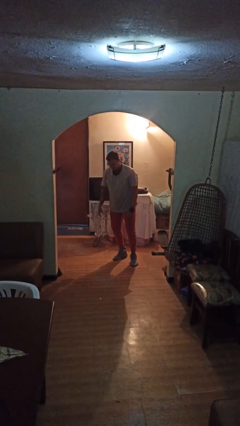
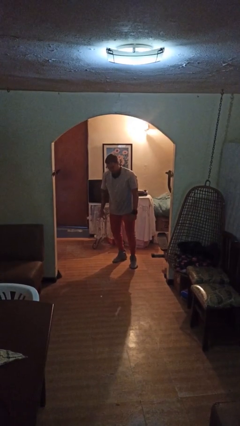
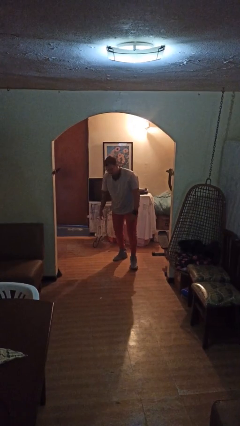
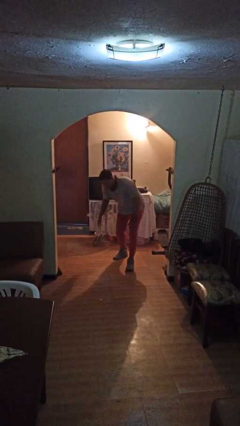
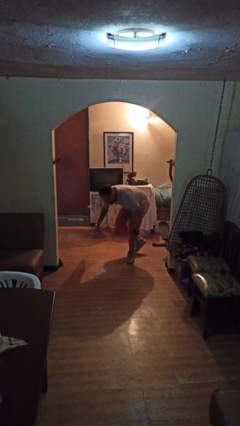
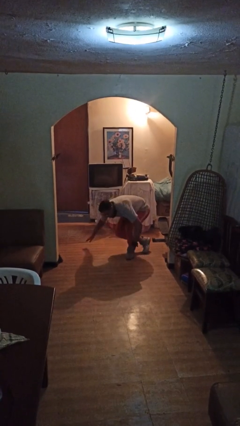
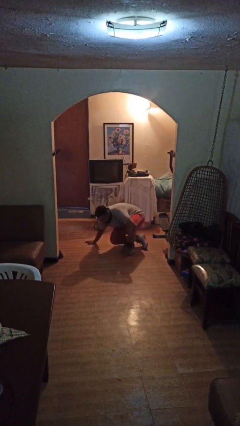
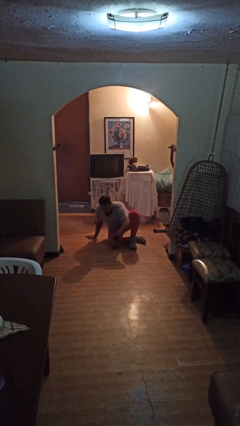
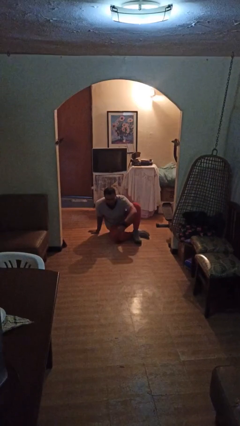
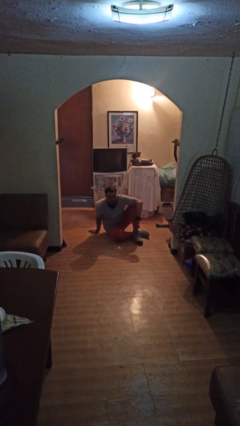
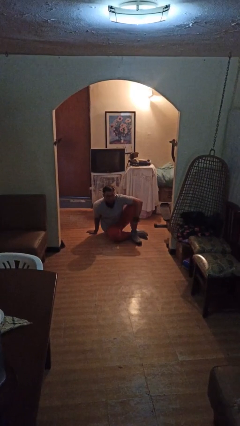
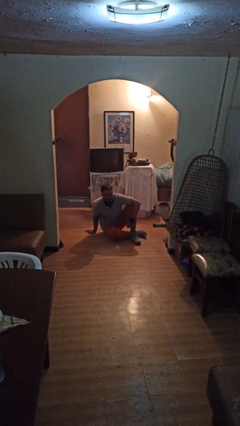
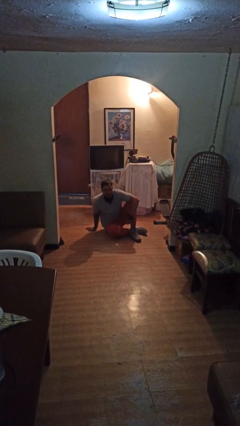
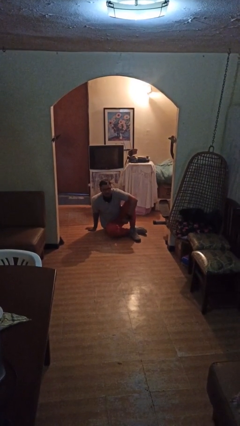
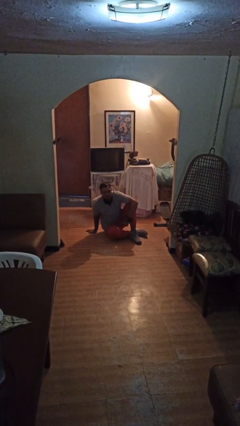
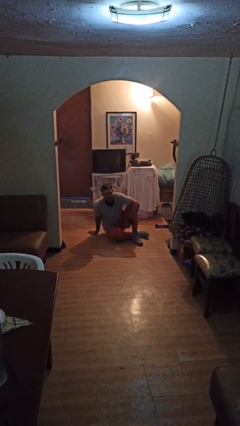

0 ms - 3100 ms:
person sits down

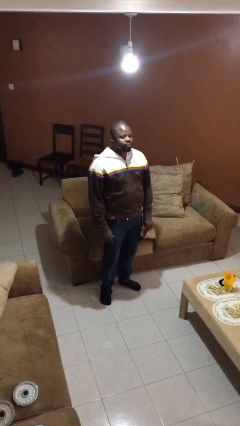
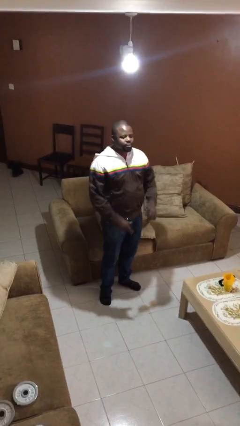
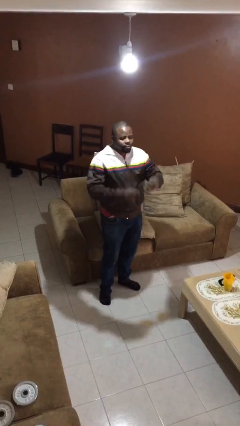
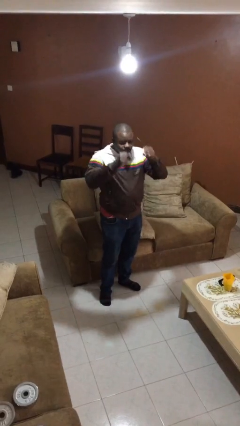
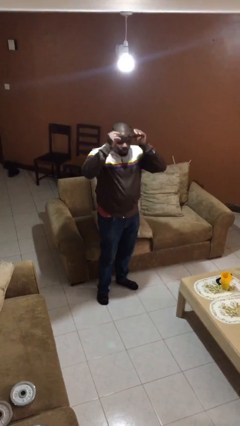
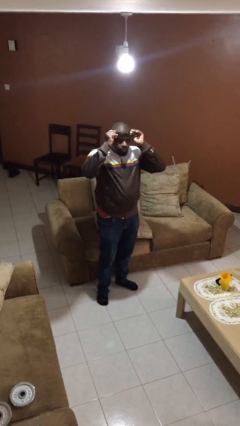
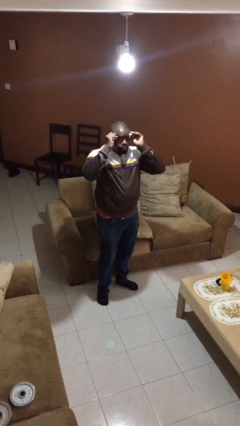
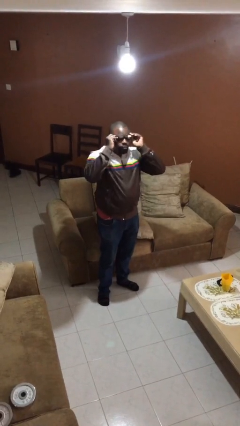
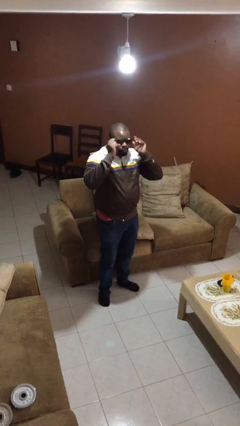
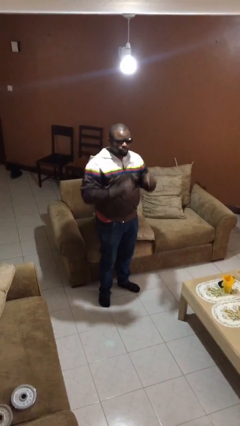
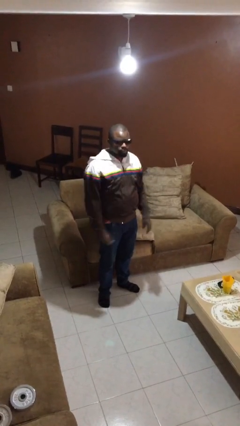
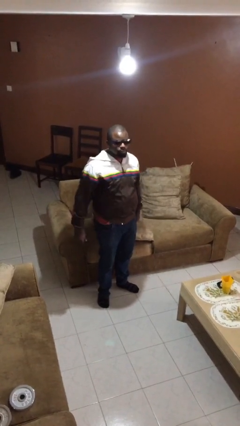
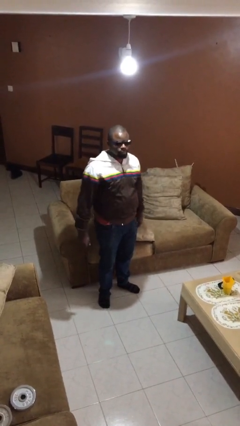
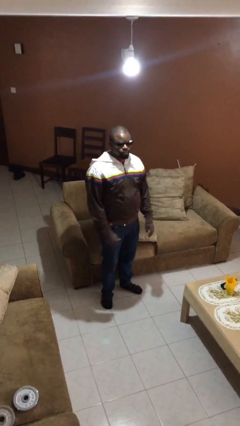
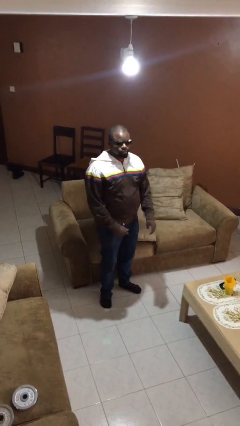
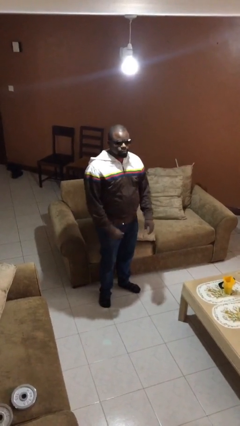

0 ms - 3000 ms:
person puts on sunglasses

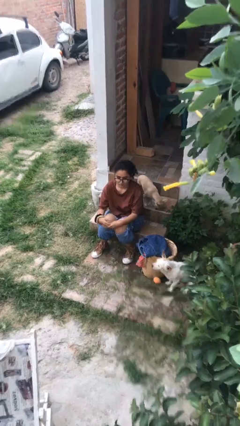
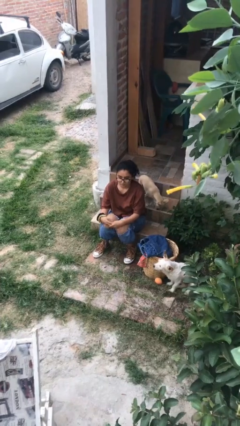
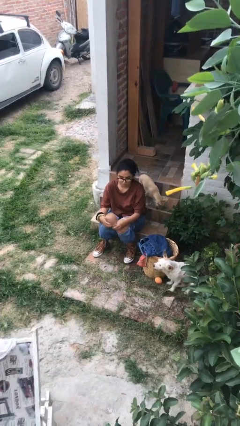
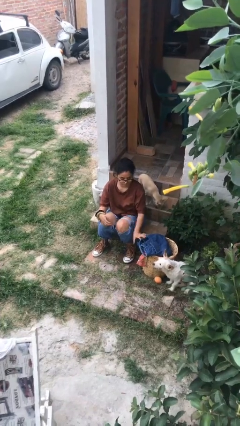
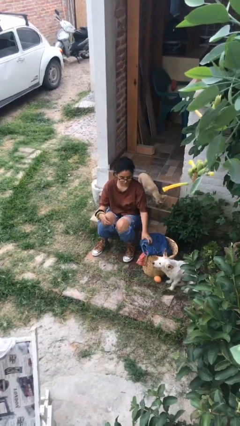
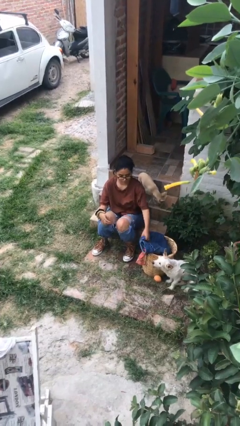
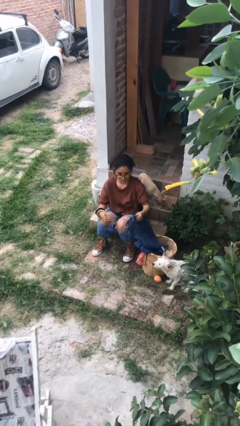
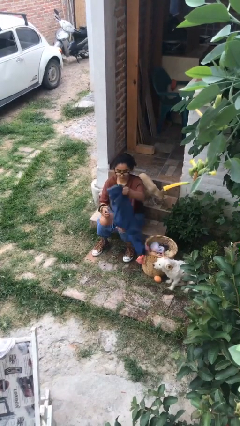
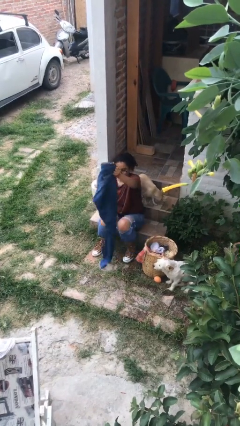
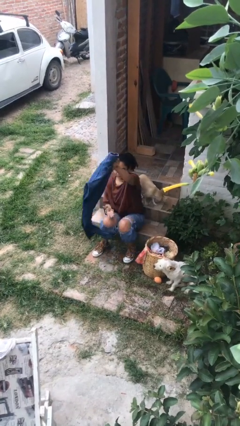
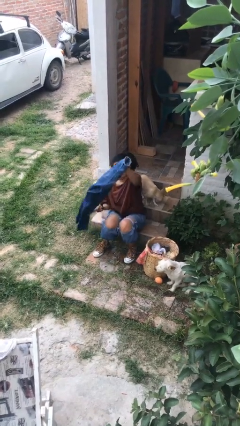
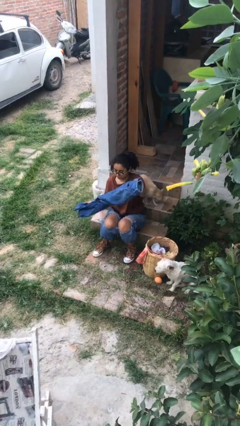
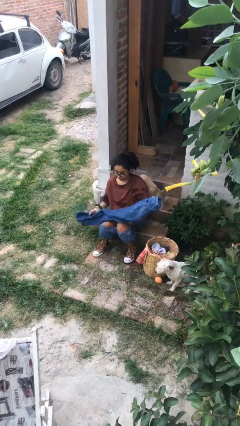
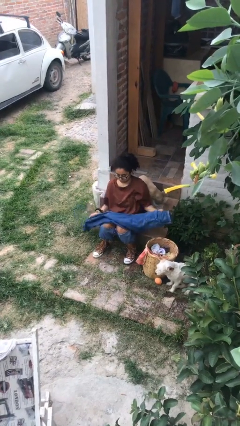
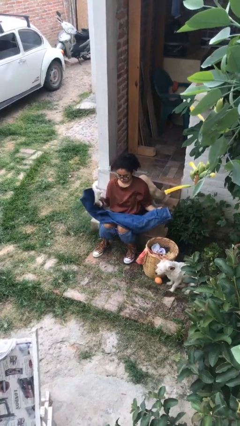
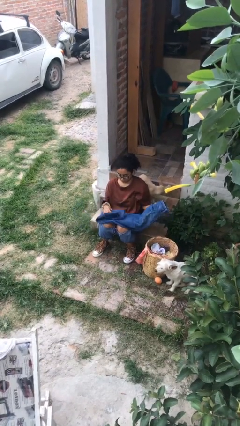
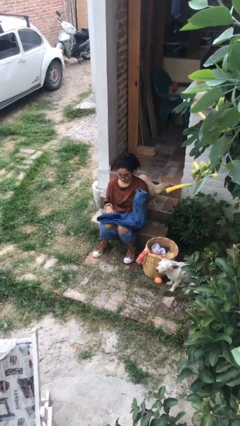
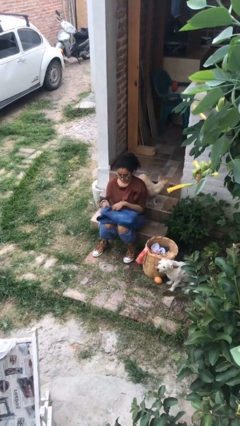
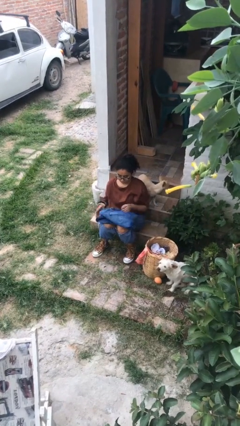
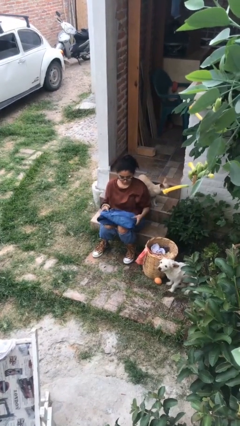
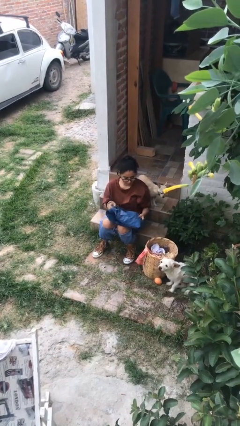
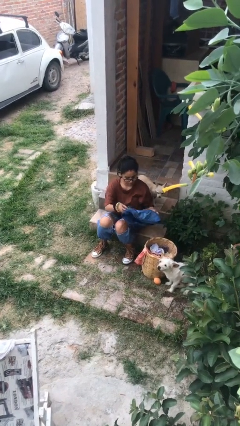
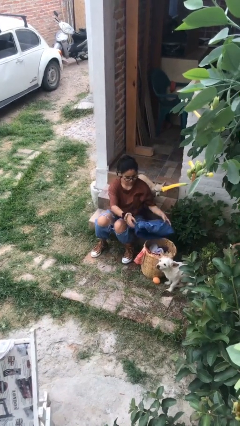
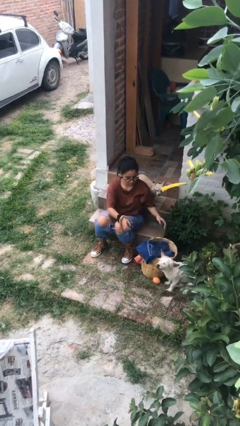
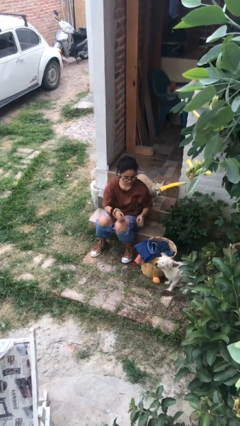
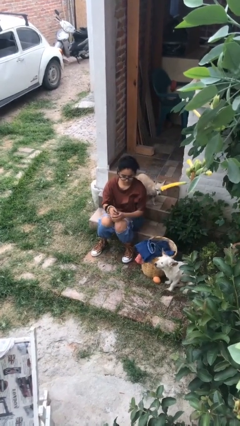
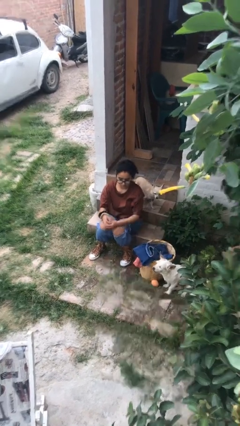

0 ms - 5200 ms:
person folds pants

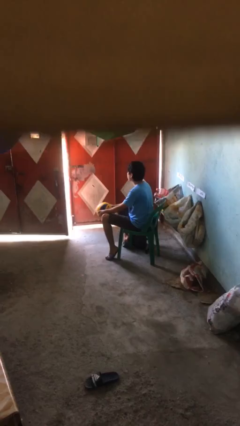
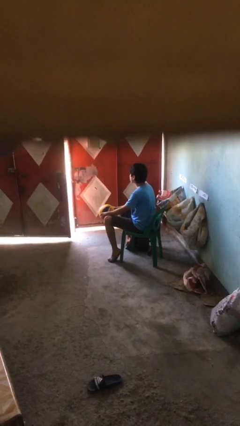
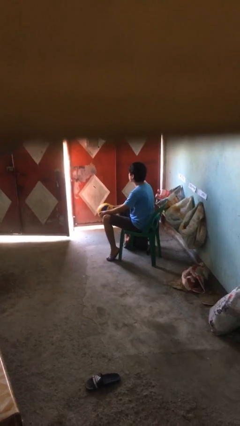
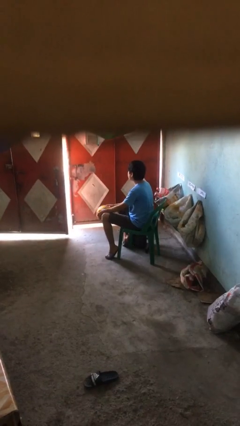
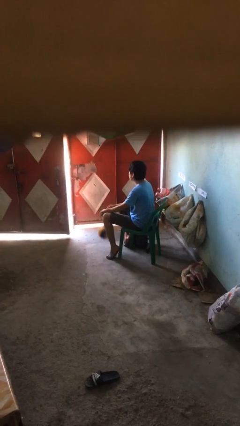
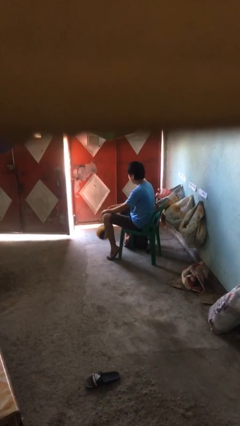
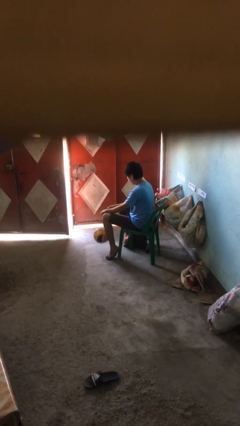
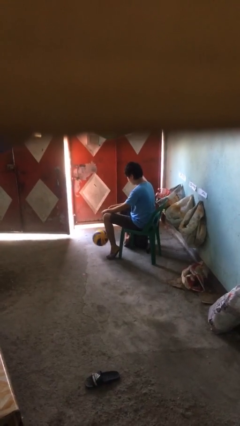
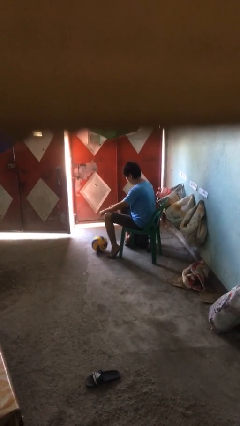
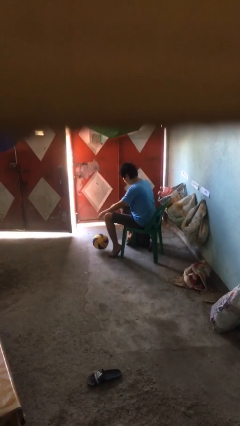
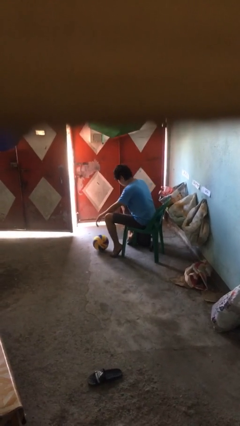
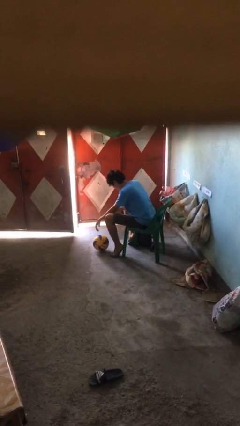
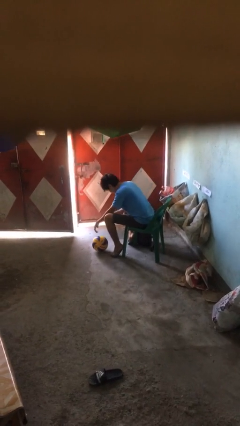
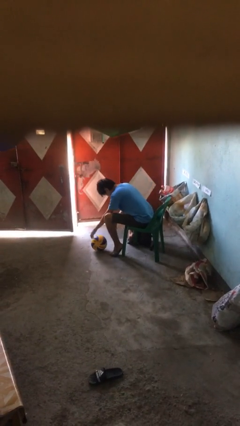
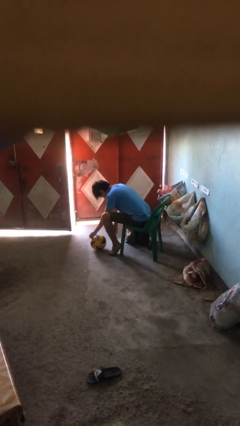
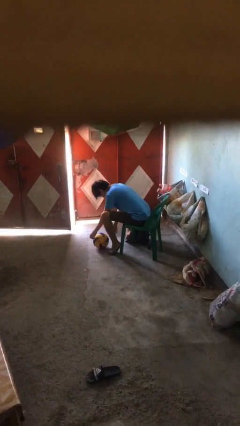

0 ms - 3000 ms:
person drops object

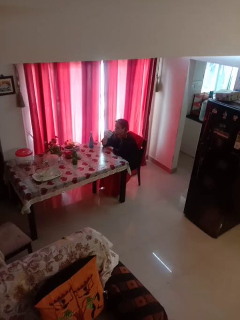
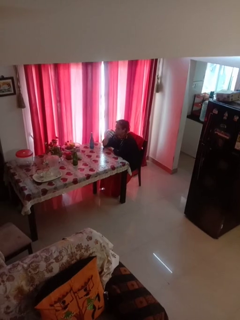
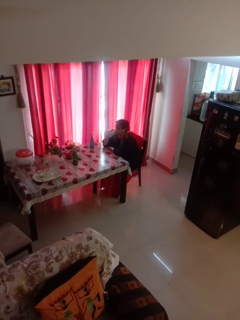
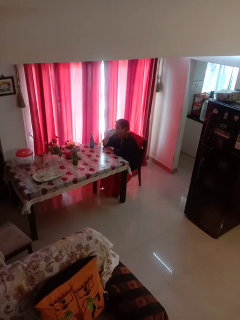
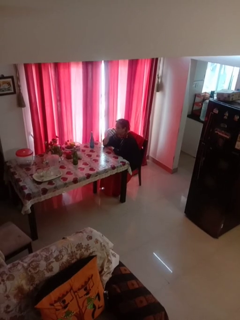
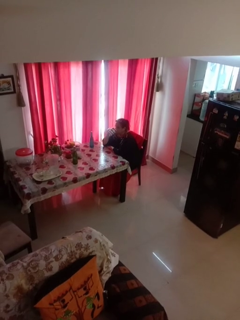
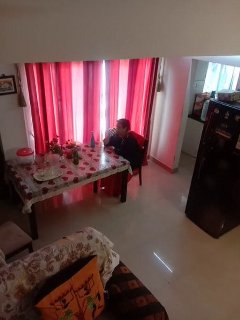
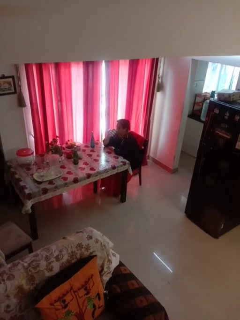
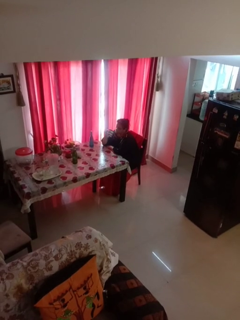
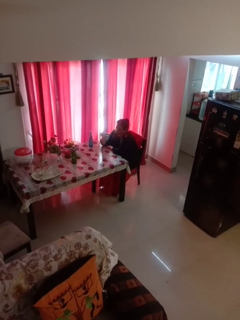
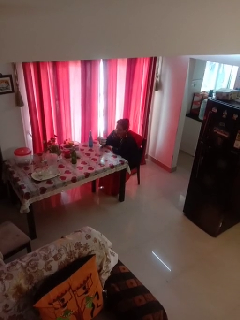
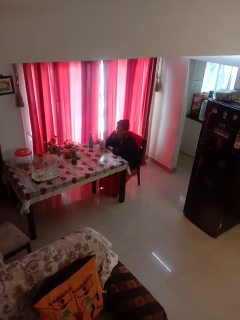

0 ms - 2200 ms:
person drinks from mug

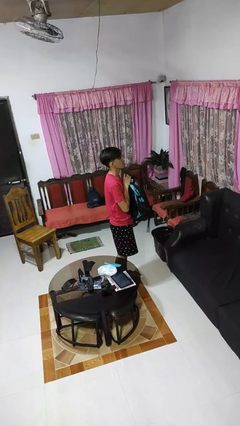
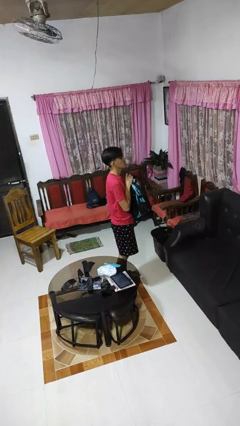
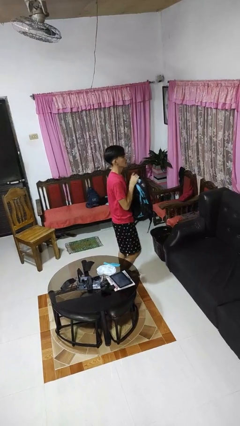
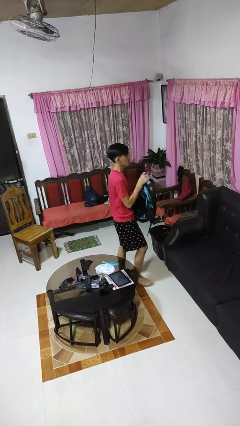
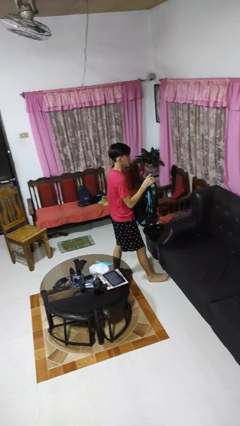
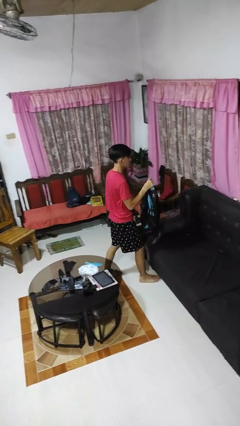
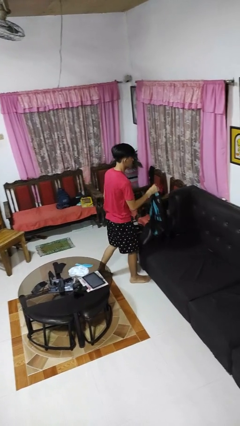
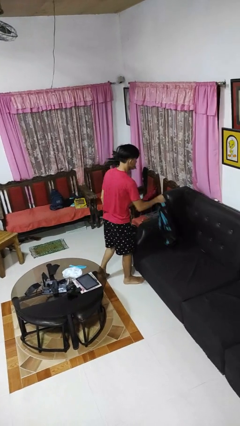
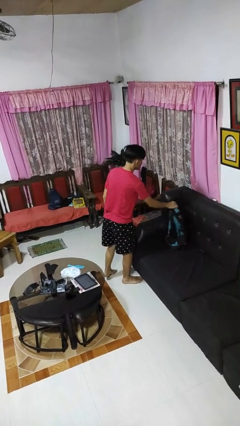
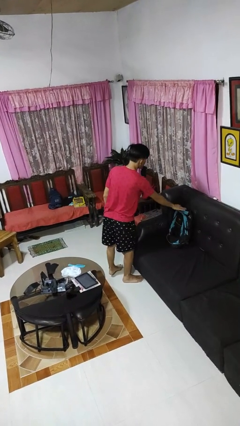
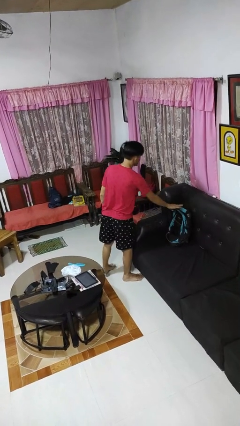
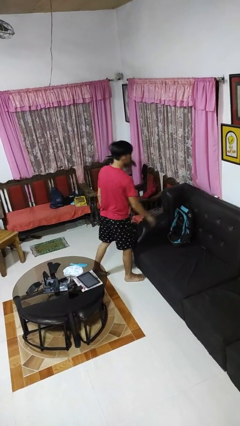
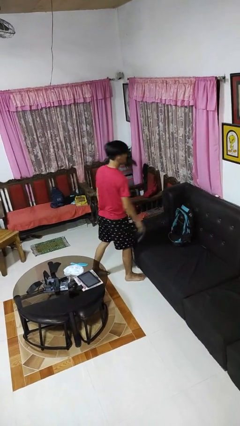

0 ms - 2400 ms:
person puts down object on couch
